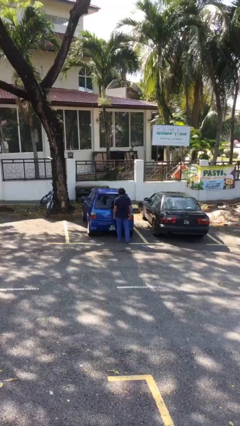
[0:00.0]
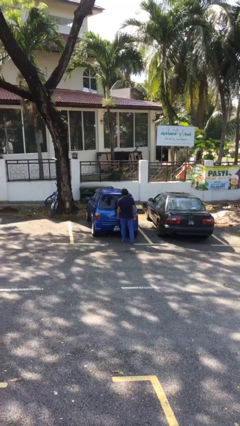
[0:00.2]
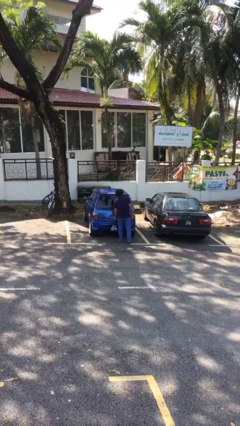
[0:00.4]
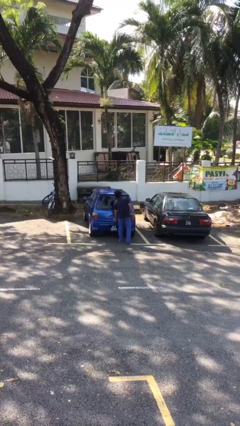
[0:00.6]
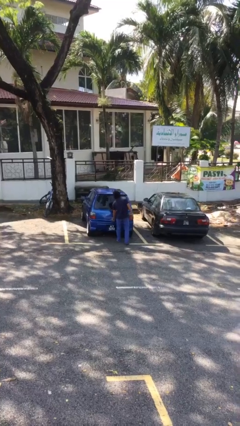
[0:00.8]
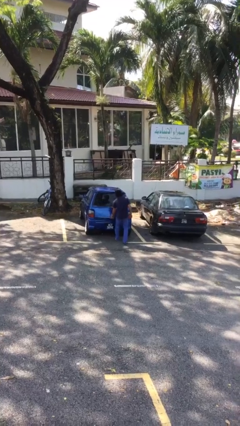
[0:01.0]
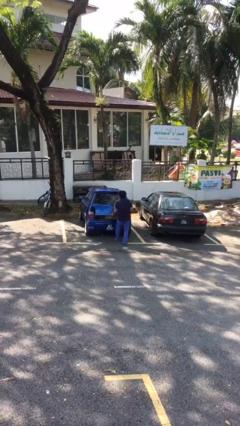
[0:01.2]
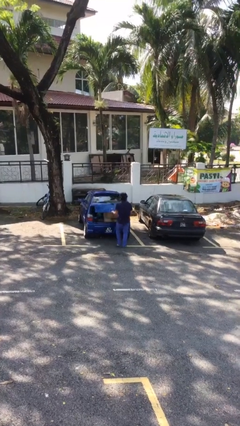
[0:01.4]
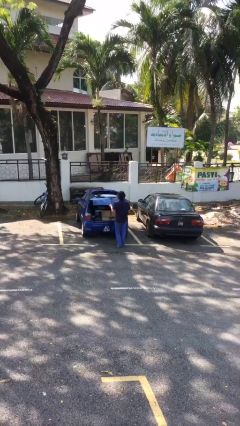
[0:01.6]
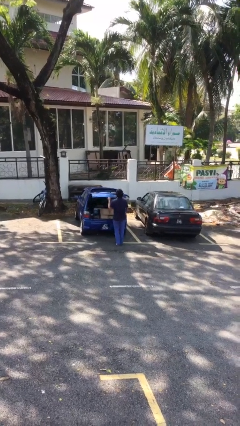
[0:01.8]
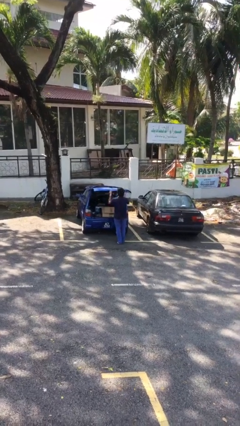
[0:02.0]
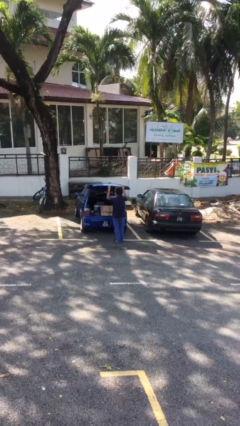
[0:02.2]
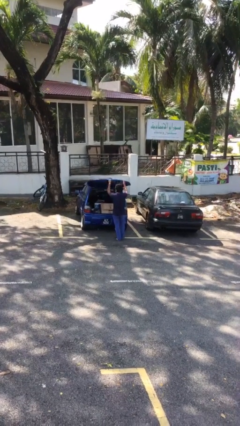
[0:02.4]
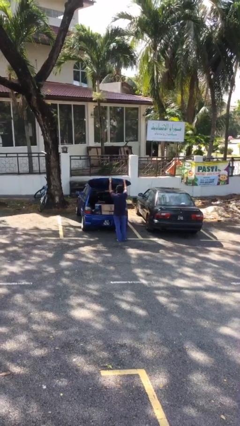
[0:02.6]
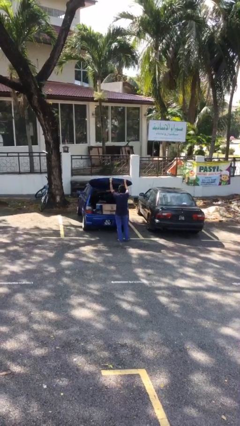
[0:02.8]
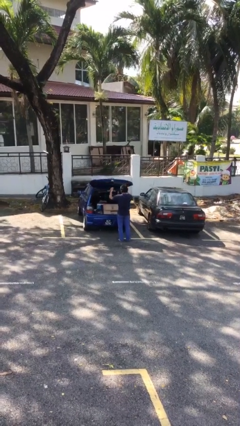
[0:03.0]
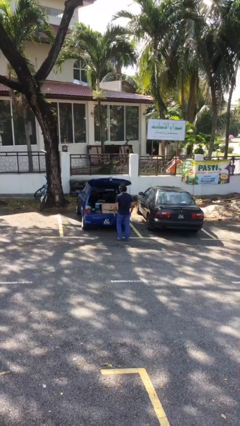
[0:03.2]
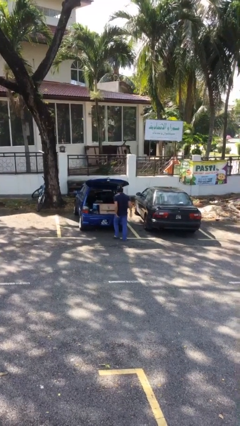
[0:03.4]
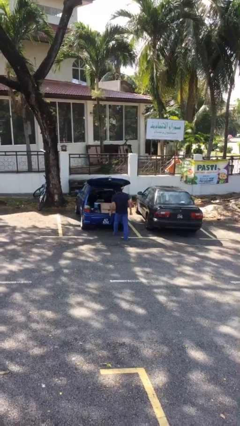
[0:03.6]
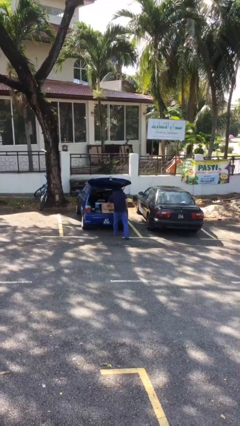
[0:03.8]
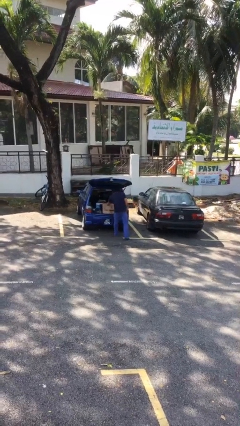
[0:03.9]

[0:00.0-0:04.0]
person opens car trunk

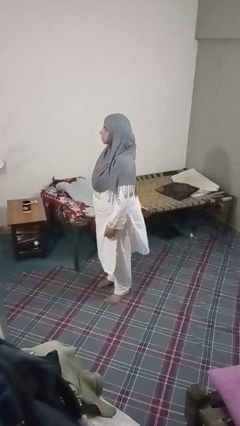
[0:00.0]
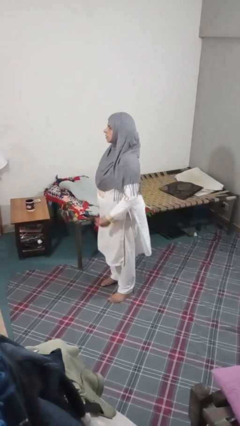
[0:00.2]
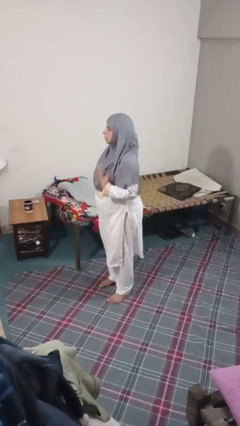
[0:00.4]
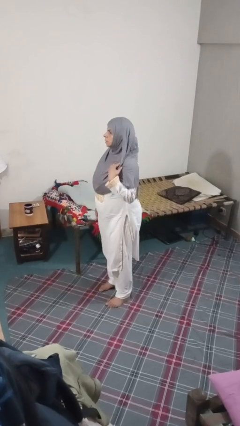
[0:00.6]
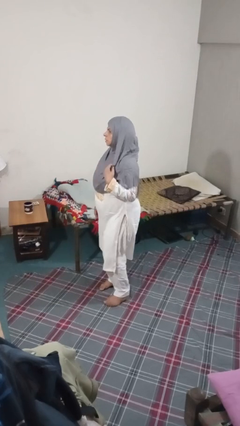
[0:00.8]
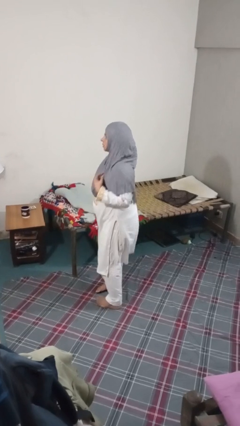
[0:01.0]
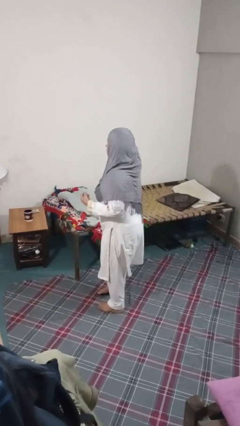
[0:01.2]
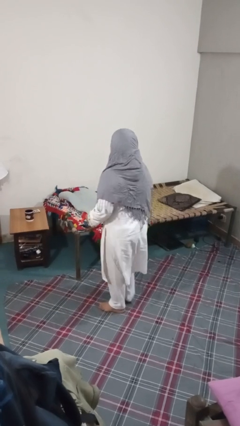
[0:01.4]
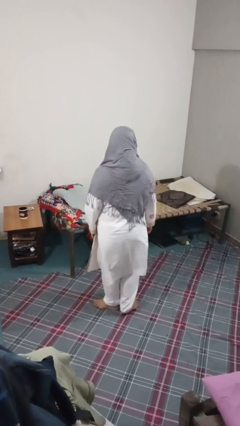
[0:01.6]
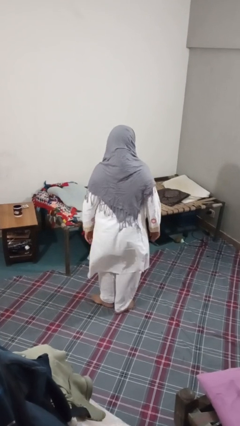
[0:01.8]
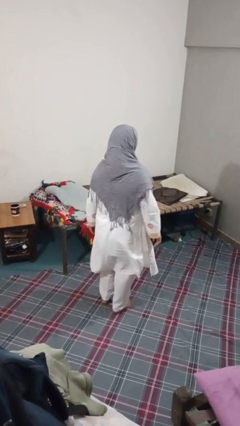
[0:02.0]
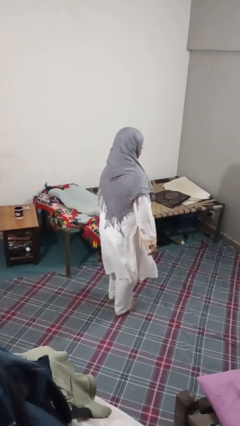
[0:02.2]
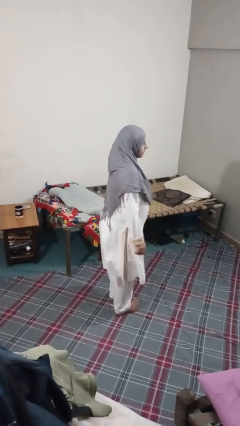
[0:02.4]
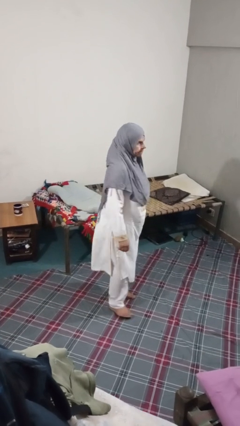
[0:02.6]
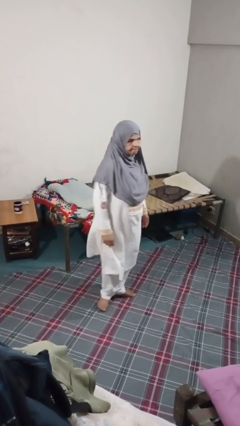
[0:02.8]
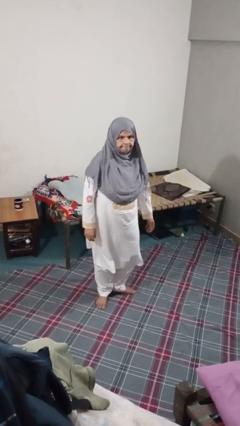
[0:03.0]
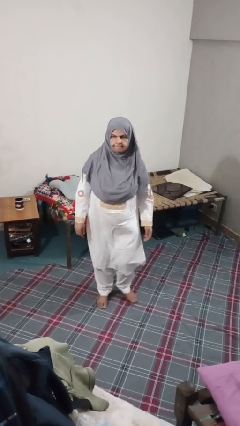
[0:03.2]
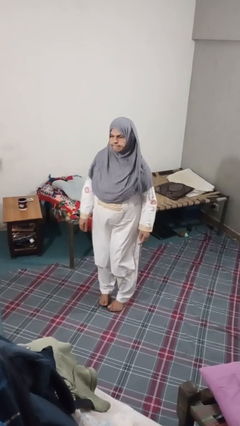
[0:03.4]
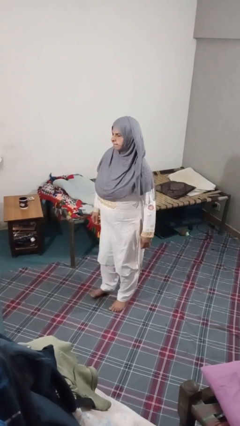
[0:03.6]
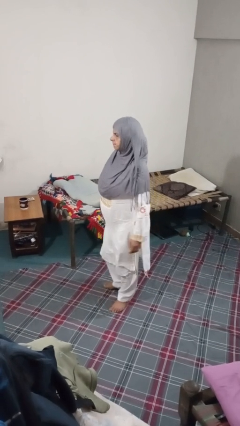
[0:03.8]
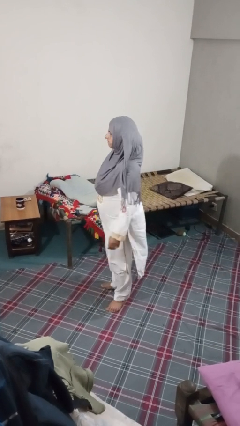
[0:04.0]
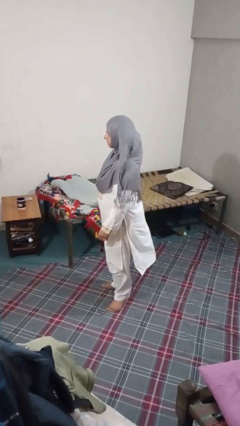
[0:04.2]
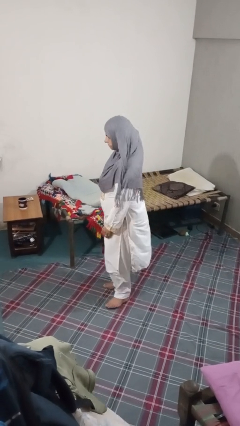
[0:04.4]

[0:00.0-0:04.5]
person twirls

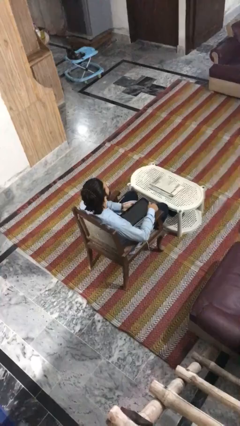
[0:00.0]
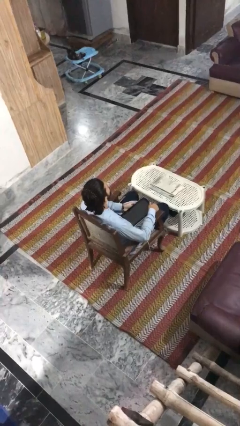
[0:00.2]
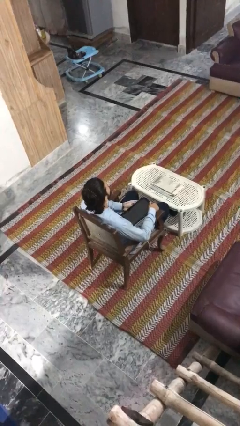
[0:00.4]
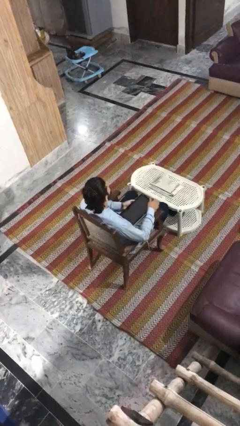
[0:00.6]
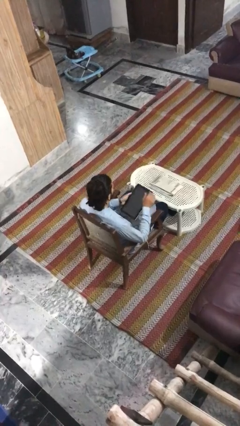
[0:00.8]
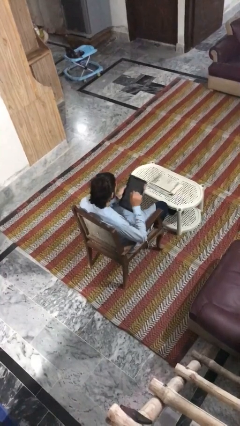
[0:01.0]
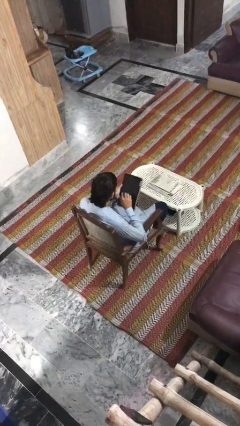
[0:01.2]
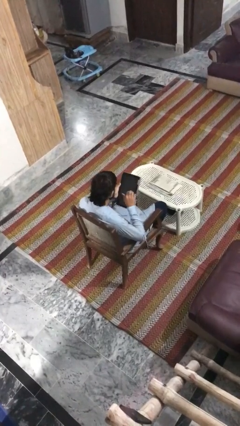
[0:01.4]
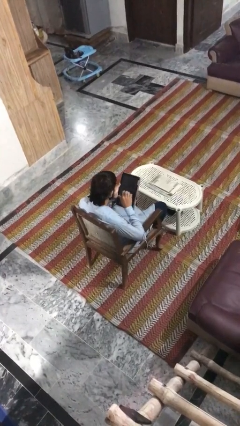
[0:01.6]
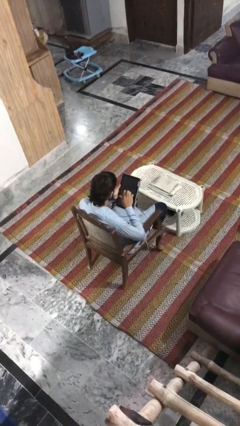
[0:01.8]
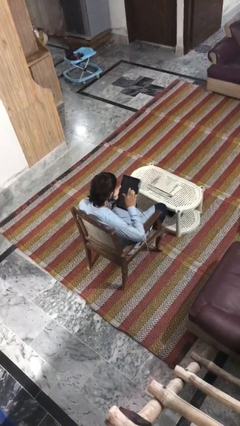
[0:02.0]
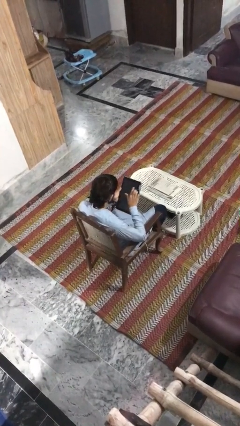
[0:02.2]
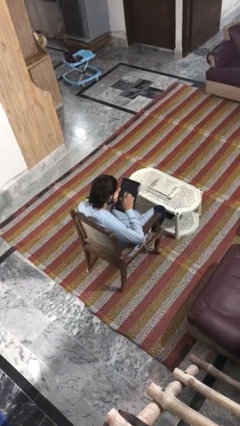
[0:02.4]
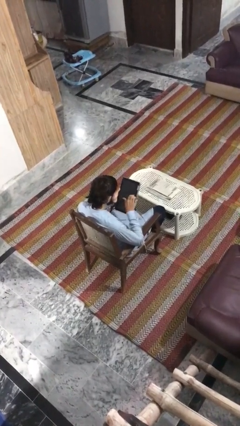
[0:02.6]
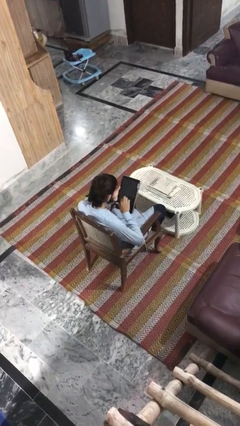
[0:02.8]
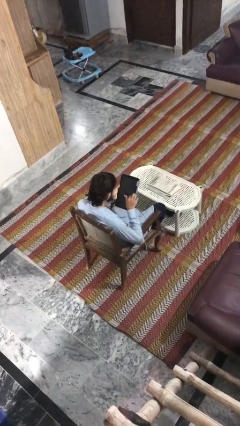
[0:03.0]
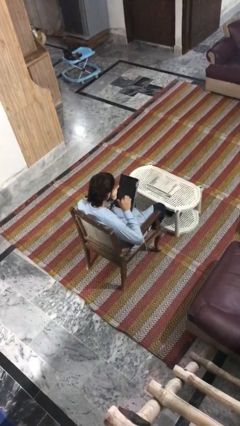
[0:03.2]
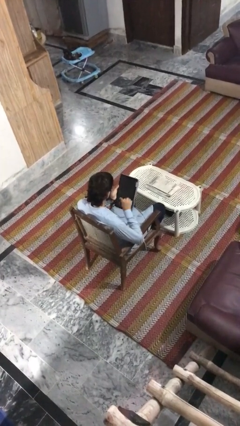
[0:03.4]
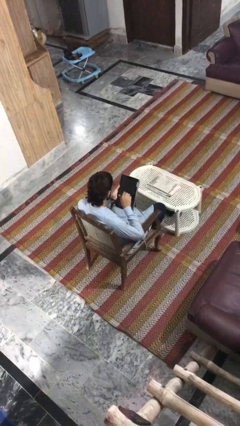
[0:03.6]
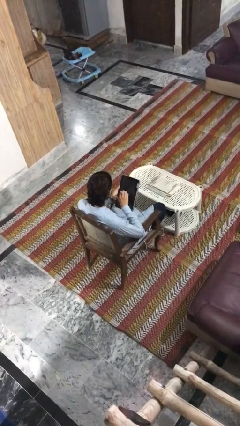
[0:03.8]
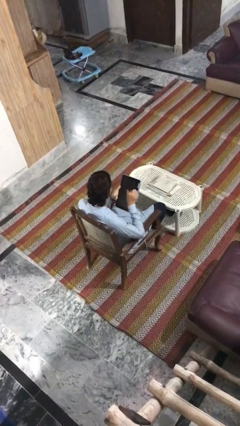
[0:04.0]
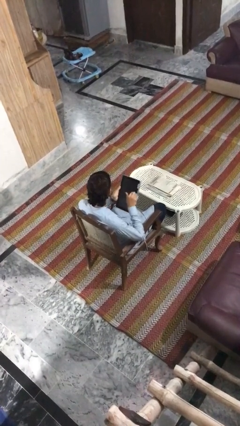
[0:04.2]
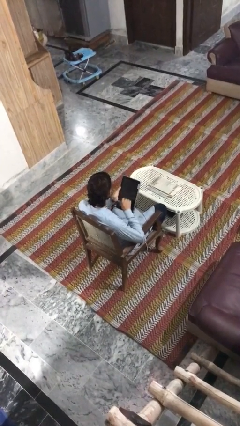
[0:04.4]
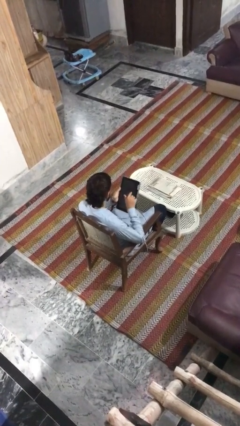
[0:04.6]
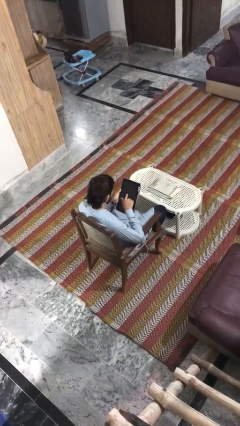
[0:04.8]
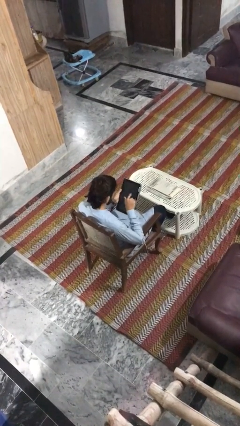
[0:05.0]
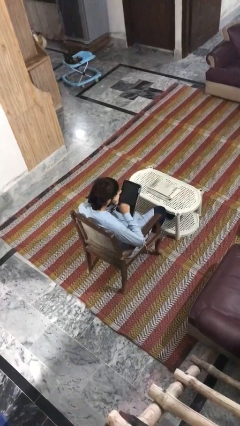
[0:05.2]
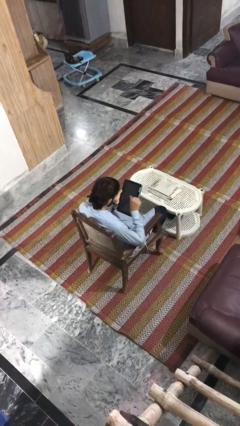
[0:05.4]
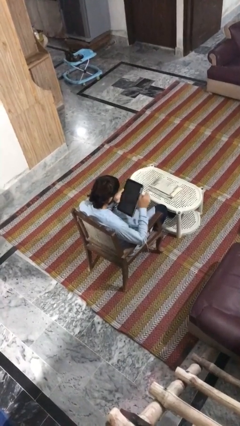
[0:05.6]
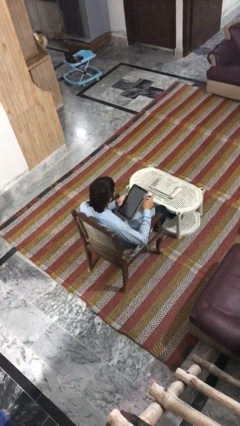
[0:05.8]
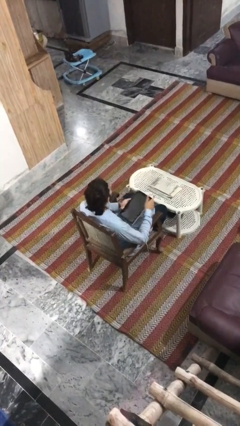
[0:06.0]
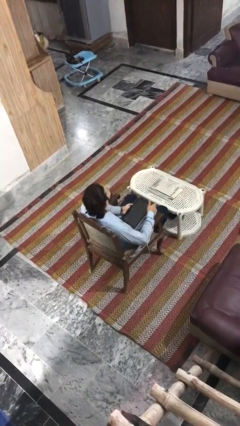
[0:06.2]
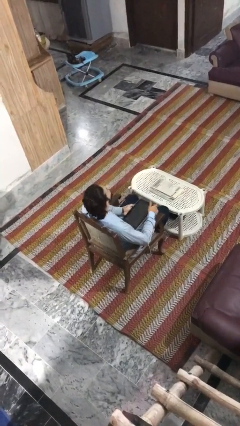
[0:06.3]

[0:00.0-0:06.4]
person interacts with tablet

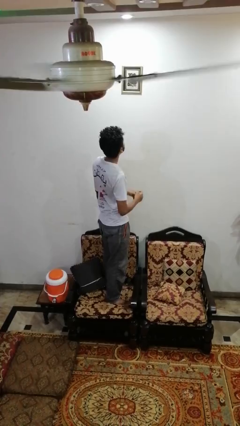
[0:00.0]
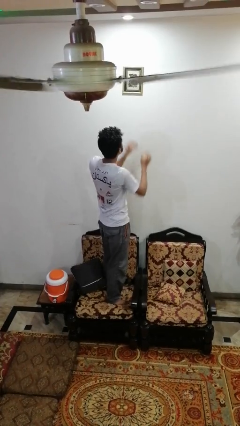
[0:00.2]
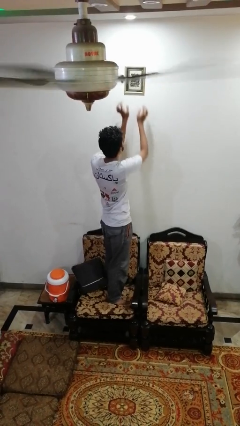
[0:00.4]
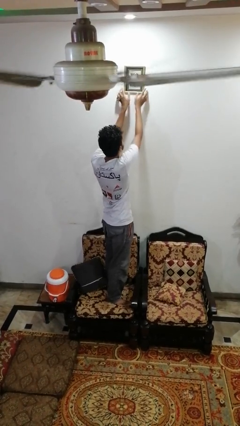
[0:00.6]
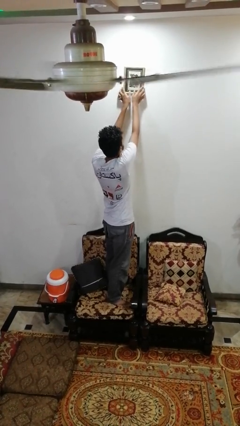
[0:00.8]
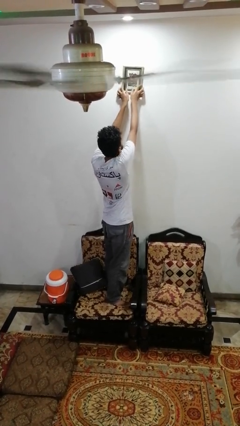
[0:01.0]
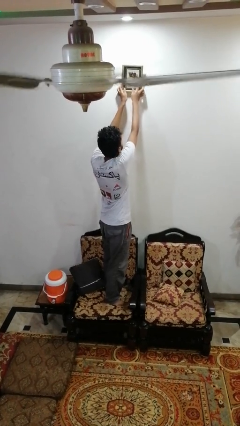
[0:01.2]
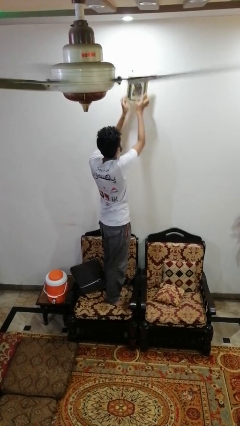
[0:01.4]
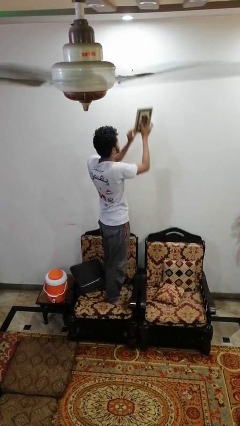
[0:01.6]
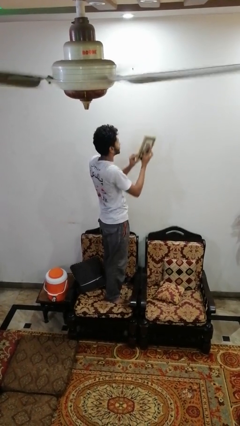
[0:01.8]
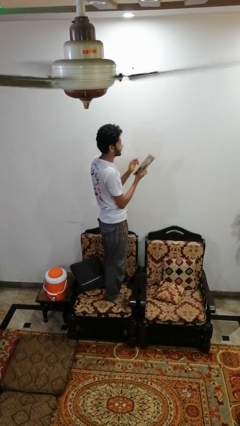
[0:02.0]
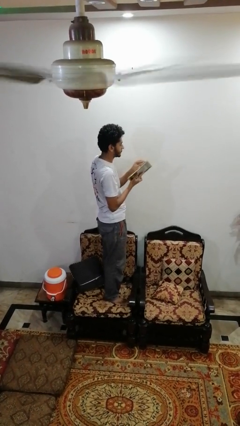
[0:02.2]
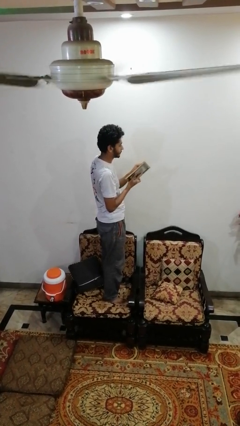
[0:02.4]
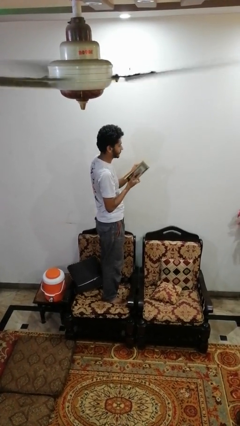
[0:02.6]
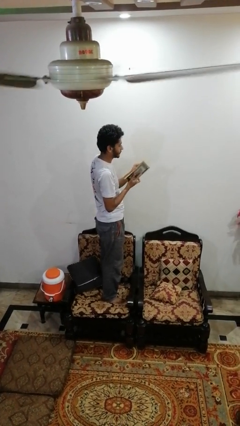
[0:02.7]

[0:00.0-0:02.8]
person takes down picture frame

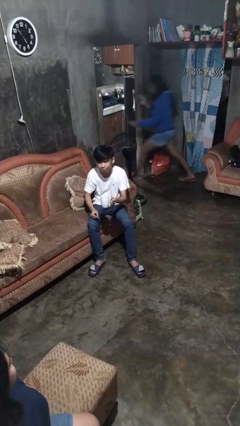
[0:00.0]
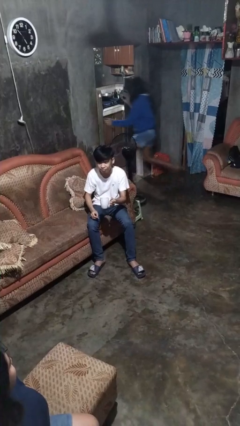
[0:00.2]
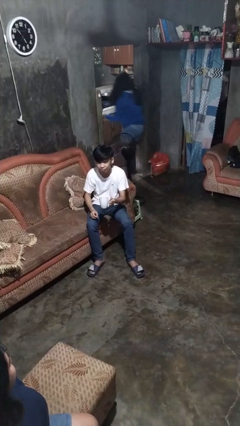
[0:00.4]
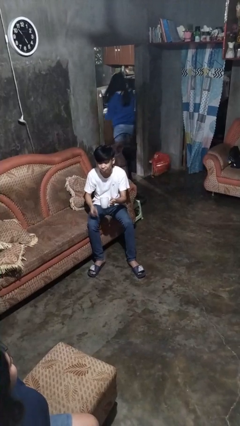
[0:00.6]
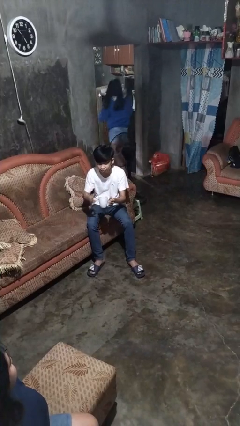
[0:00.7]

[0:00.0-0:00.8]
person stirs mug
